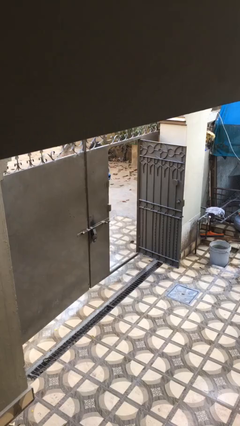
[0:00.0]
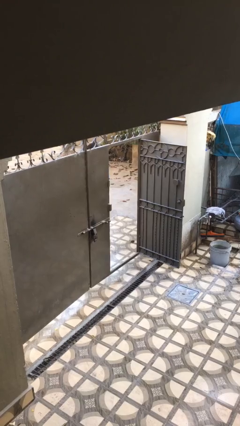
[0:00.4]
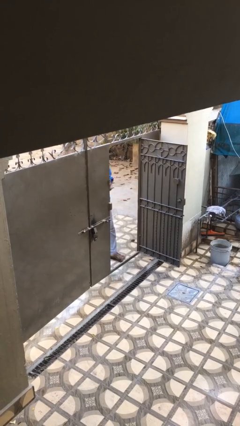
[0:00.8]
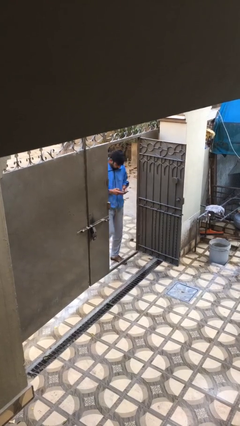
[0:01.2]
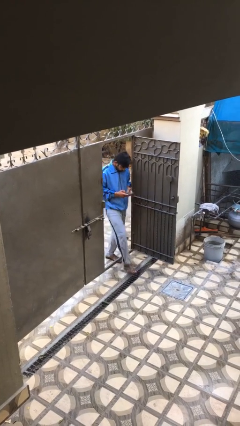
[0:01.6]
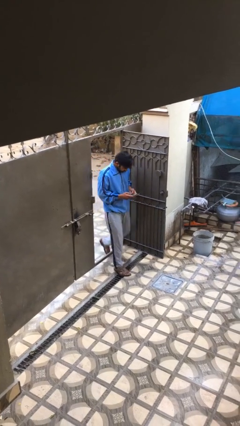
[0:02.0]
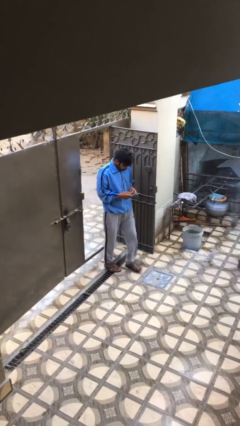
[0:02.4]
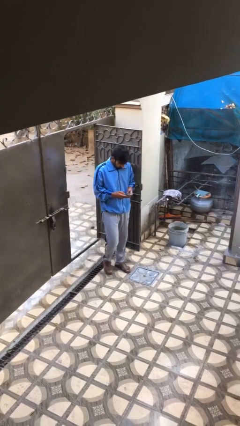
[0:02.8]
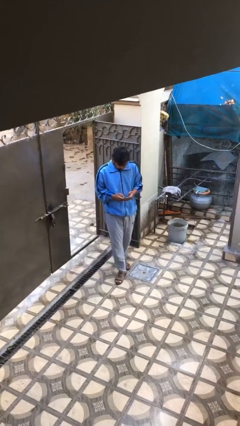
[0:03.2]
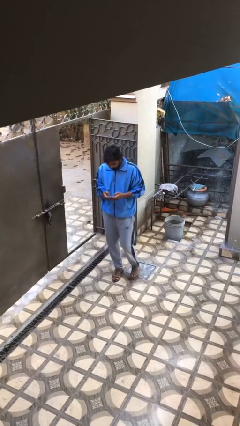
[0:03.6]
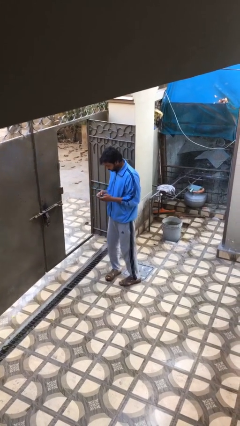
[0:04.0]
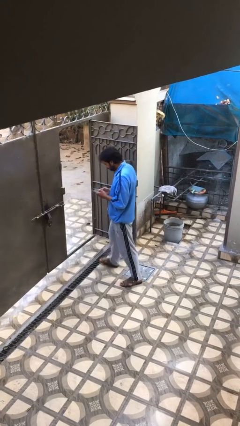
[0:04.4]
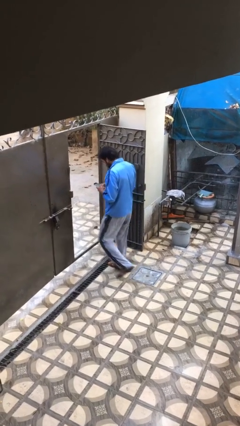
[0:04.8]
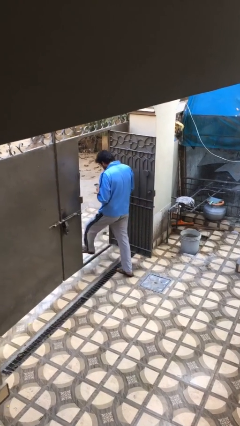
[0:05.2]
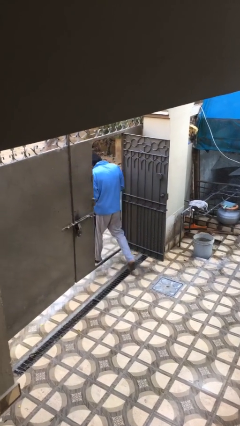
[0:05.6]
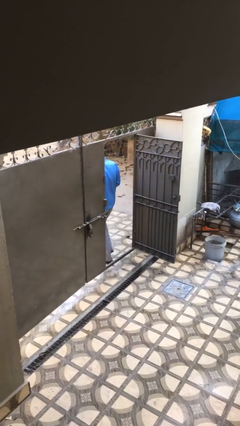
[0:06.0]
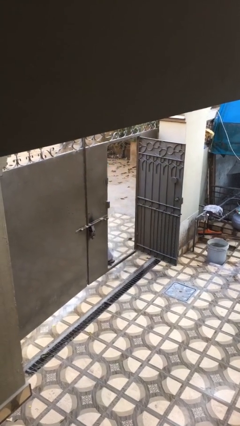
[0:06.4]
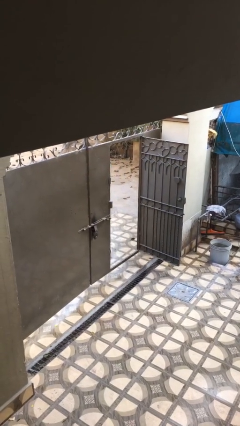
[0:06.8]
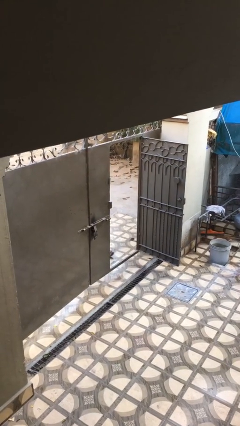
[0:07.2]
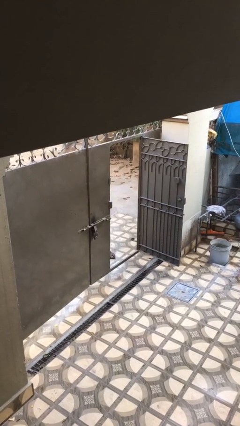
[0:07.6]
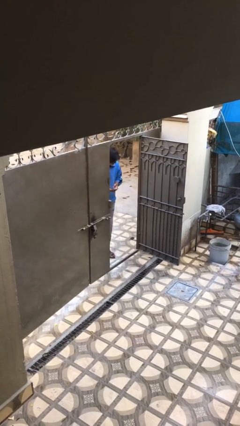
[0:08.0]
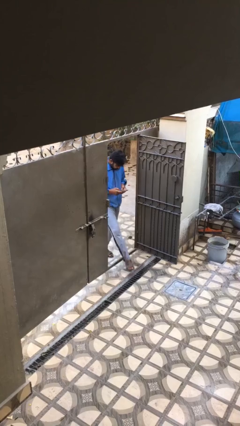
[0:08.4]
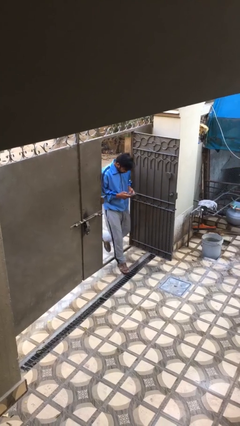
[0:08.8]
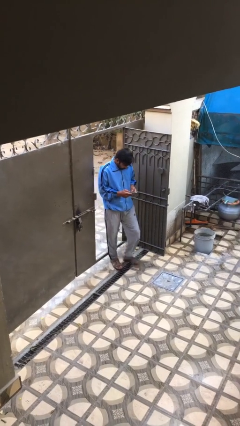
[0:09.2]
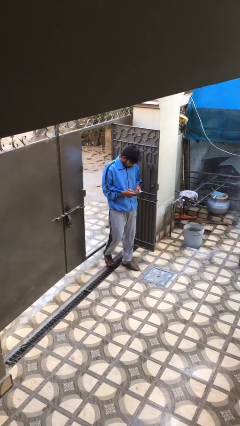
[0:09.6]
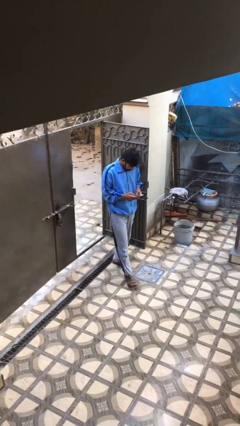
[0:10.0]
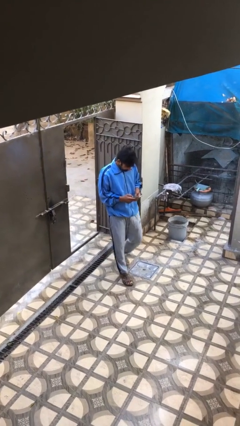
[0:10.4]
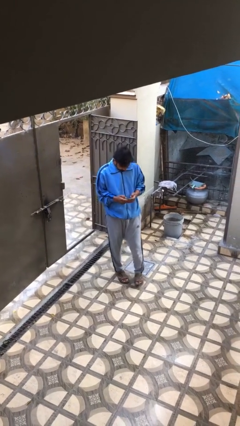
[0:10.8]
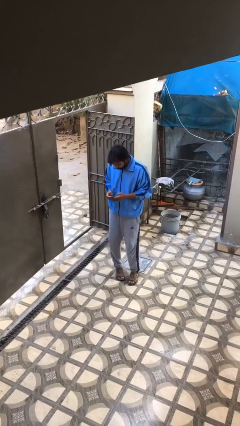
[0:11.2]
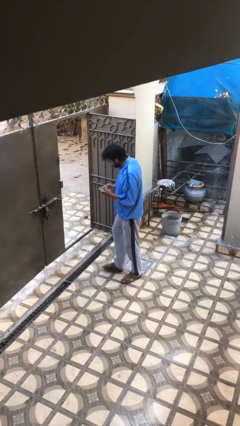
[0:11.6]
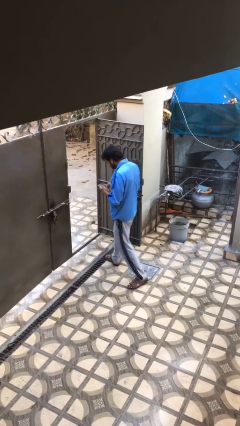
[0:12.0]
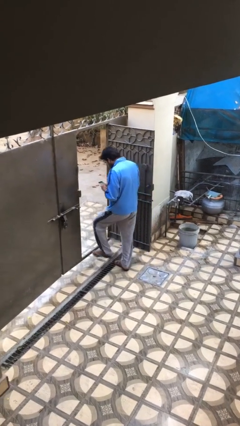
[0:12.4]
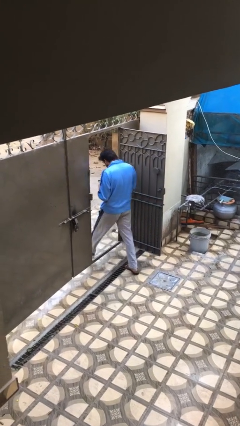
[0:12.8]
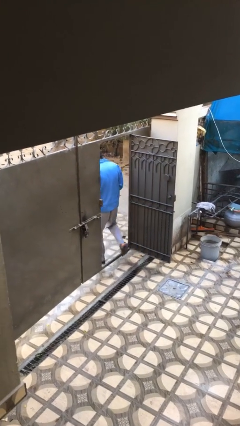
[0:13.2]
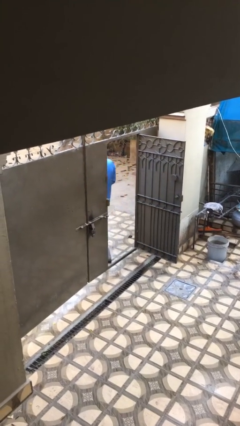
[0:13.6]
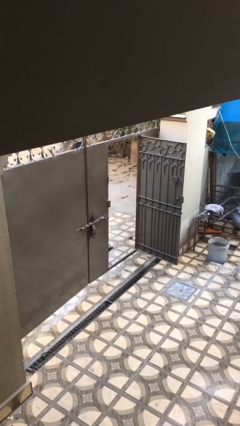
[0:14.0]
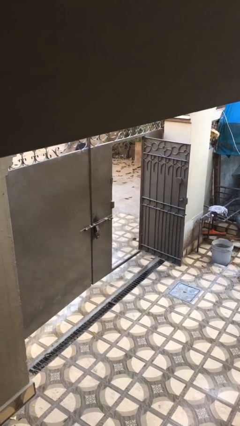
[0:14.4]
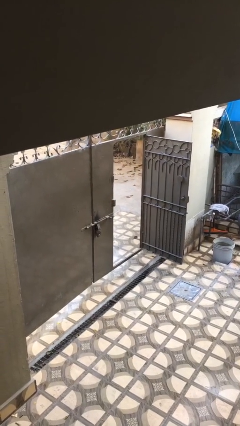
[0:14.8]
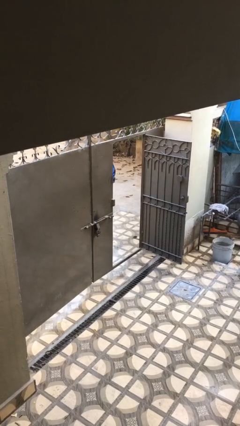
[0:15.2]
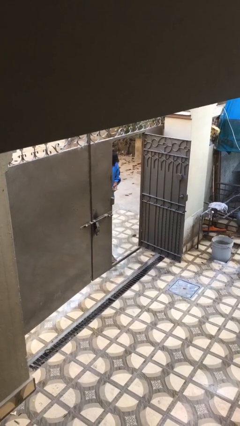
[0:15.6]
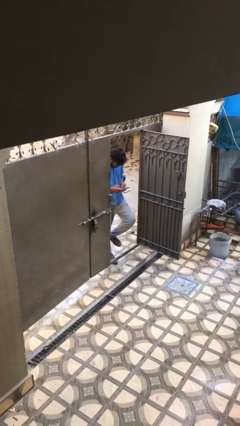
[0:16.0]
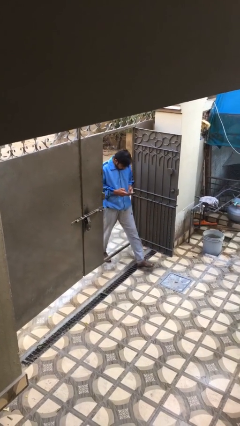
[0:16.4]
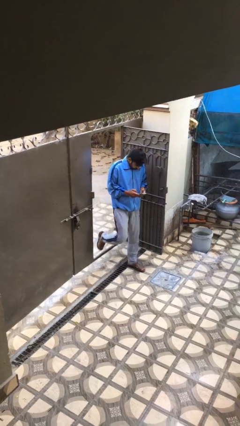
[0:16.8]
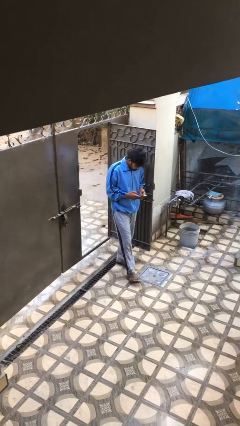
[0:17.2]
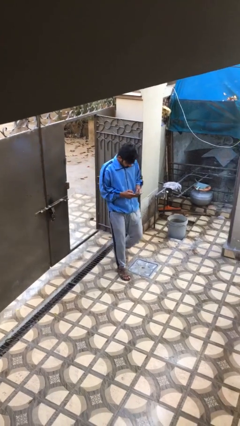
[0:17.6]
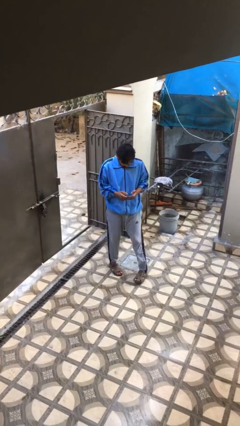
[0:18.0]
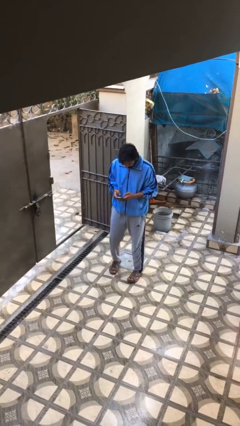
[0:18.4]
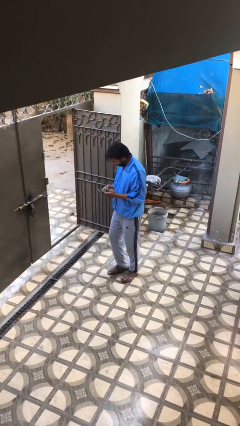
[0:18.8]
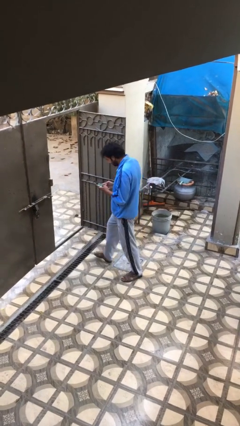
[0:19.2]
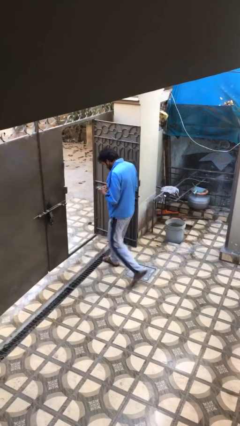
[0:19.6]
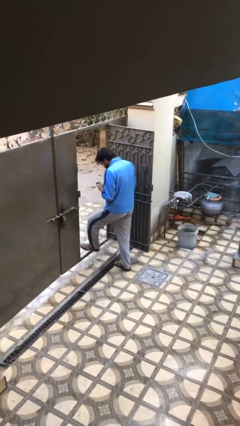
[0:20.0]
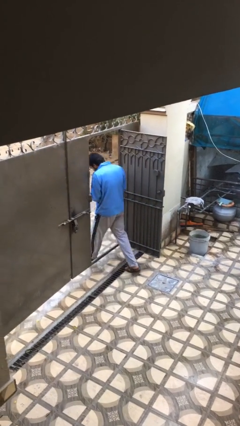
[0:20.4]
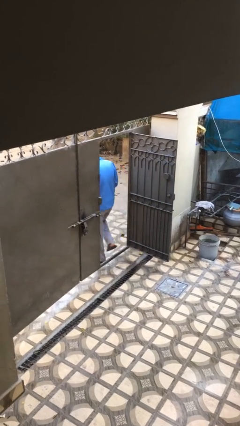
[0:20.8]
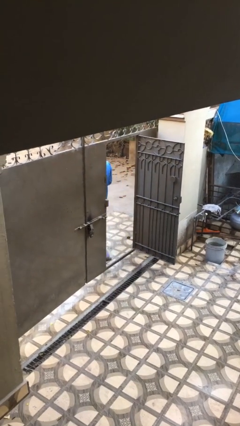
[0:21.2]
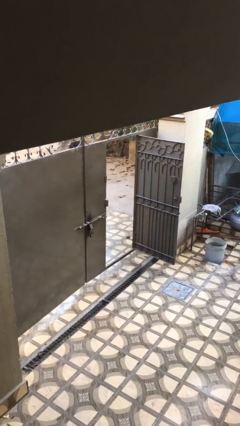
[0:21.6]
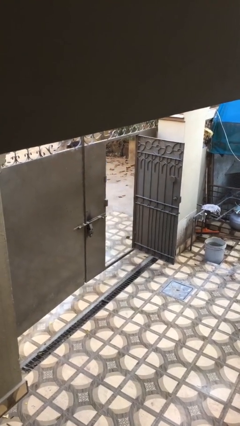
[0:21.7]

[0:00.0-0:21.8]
person texts on phone

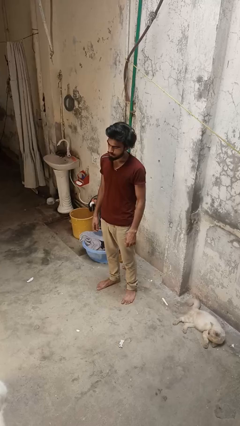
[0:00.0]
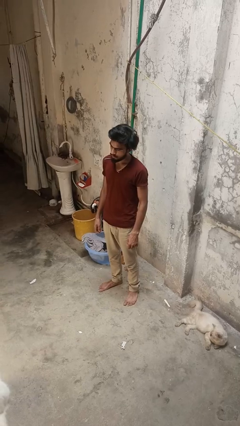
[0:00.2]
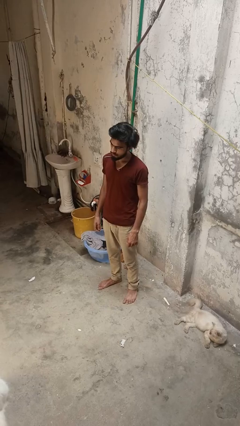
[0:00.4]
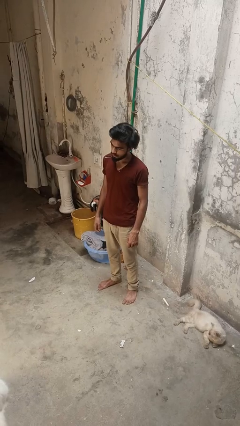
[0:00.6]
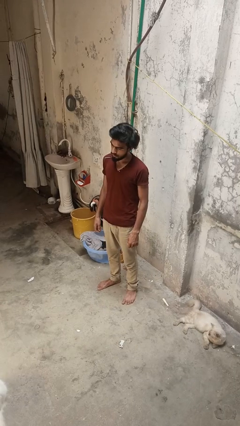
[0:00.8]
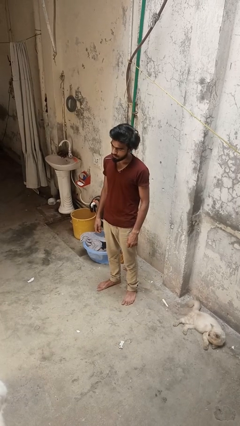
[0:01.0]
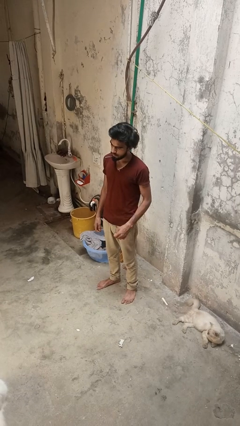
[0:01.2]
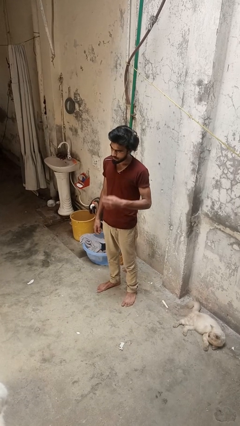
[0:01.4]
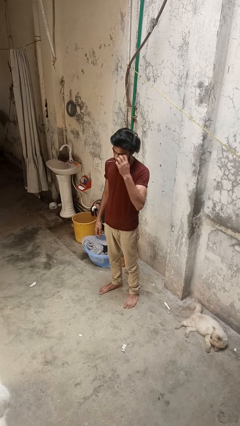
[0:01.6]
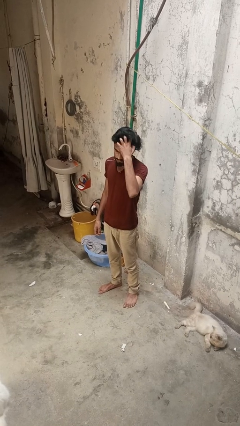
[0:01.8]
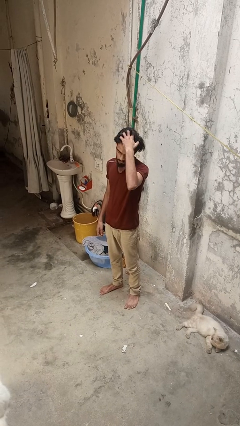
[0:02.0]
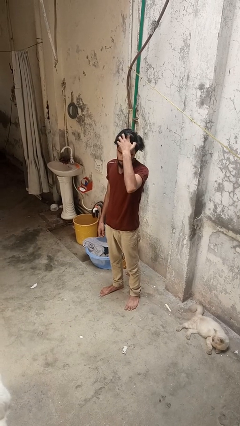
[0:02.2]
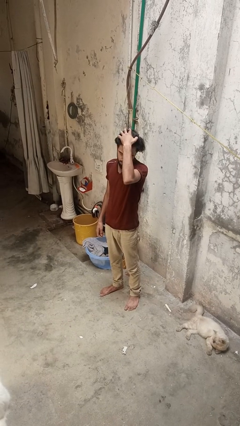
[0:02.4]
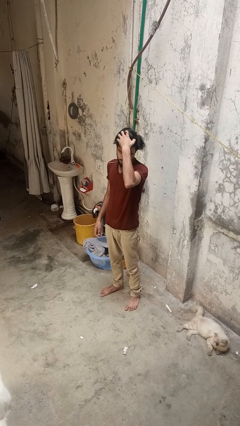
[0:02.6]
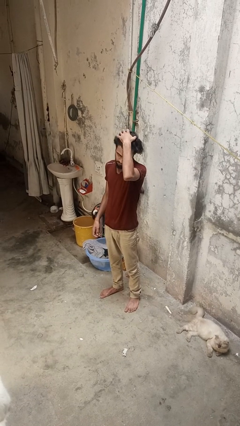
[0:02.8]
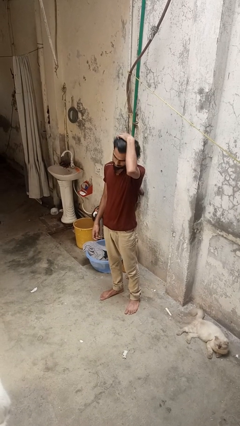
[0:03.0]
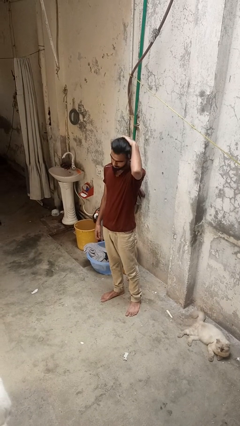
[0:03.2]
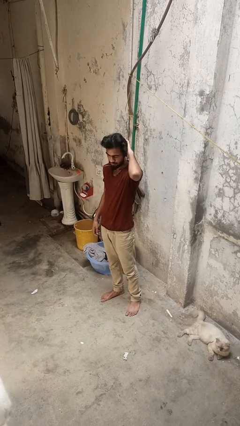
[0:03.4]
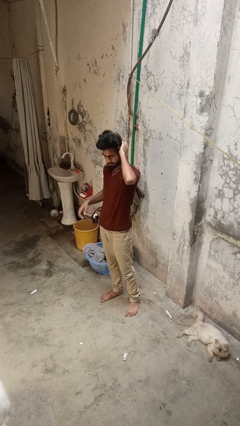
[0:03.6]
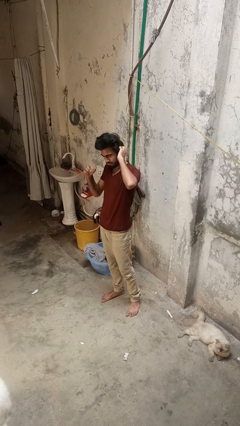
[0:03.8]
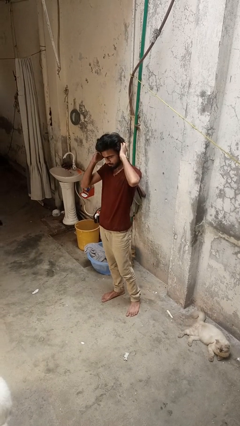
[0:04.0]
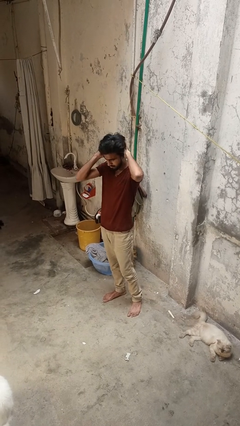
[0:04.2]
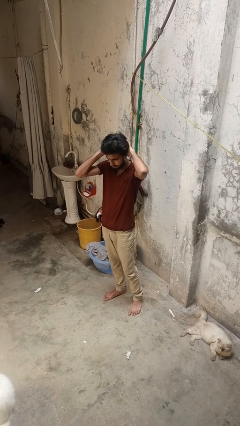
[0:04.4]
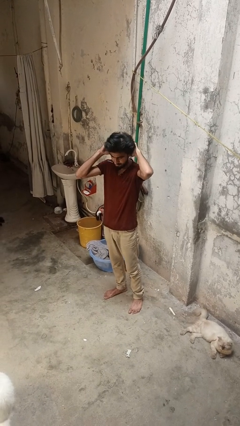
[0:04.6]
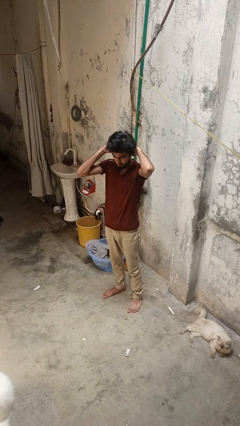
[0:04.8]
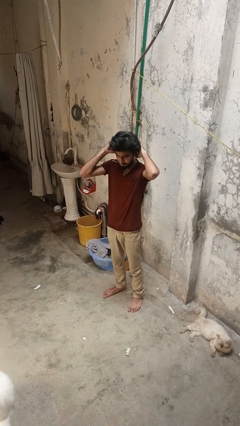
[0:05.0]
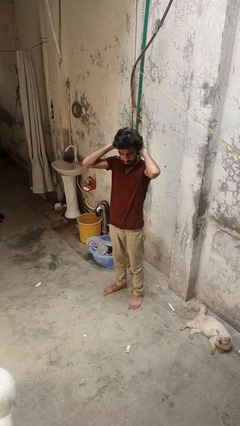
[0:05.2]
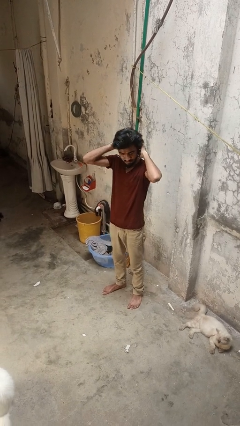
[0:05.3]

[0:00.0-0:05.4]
person scratches face

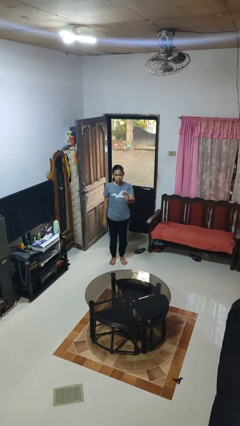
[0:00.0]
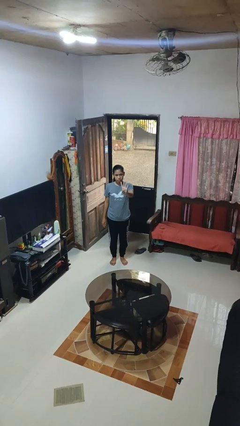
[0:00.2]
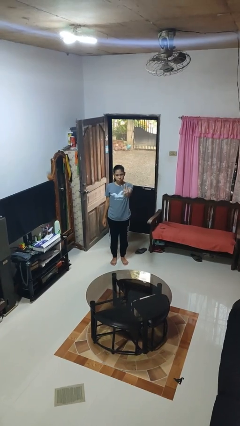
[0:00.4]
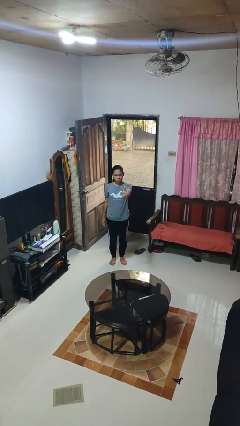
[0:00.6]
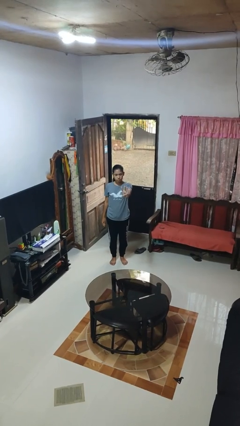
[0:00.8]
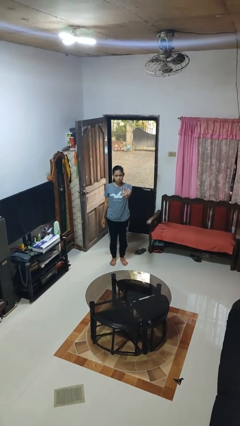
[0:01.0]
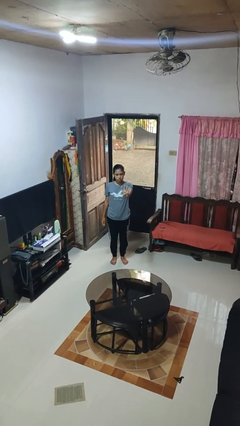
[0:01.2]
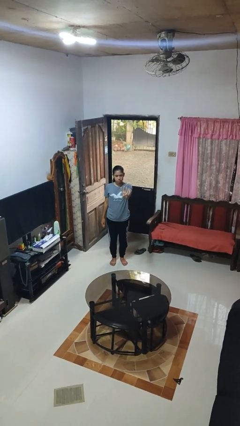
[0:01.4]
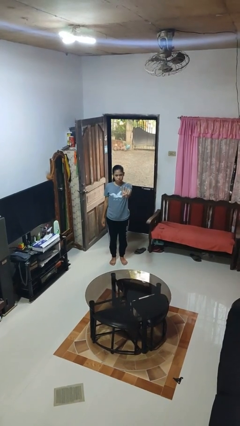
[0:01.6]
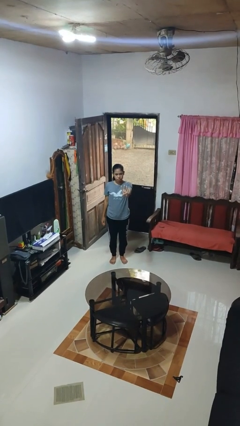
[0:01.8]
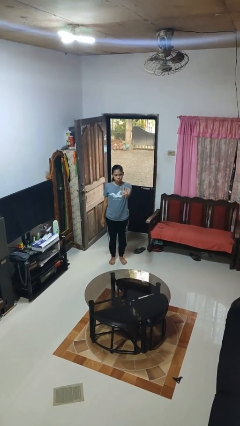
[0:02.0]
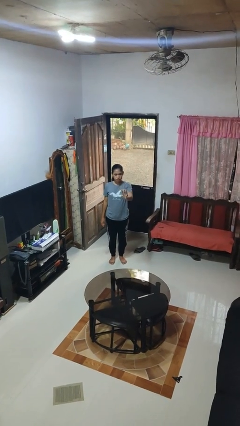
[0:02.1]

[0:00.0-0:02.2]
person gestures number four
